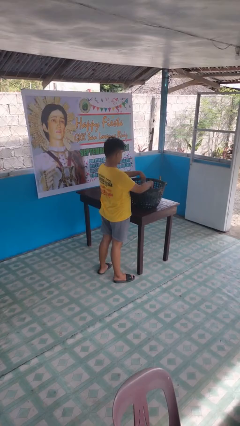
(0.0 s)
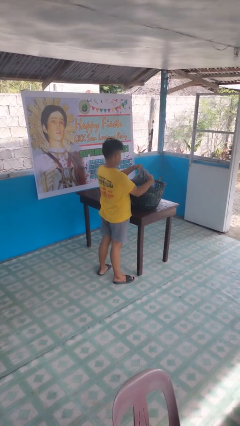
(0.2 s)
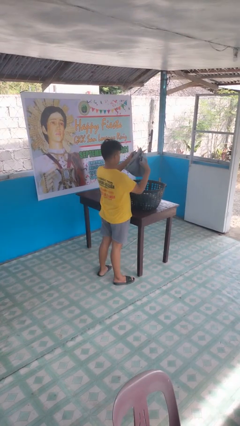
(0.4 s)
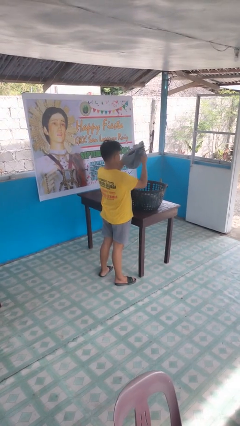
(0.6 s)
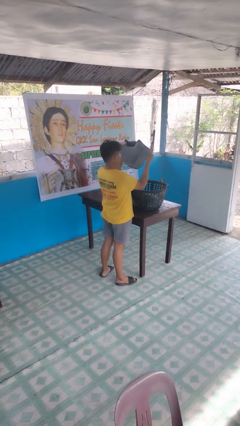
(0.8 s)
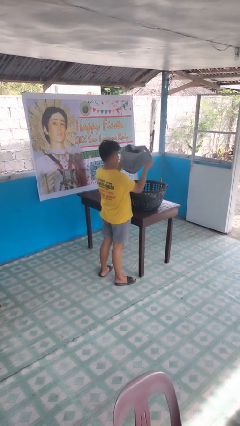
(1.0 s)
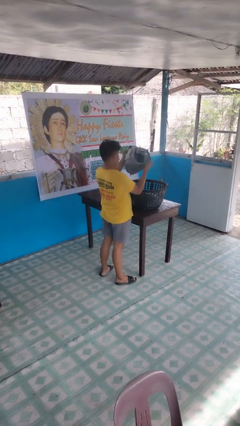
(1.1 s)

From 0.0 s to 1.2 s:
person takes object from basket

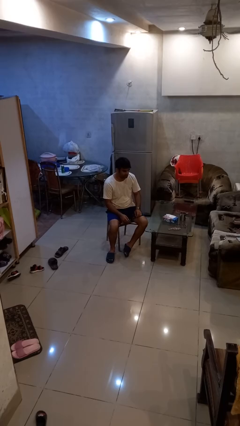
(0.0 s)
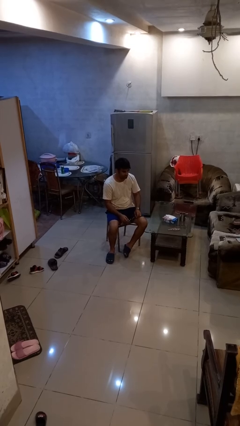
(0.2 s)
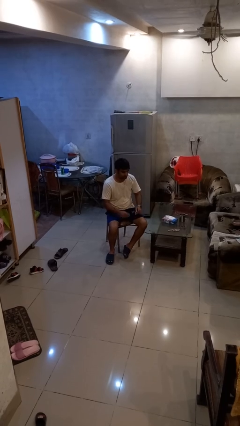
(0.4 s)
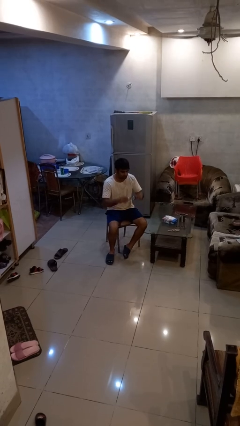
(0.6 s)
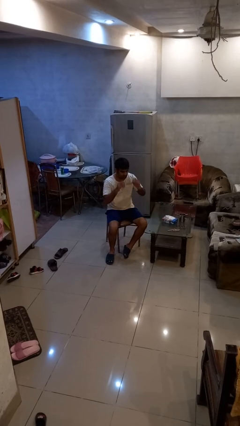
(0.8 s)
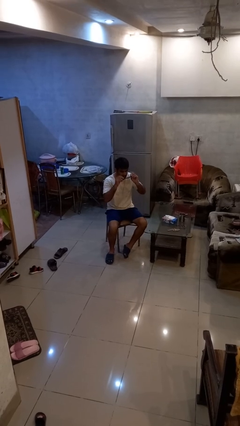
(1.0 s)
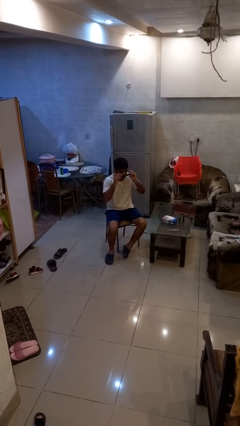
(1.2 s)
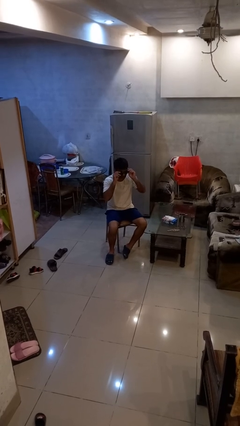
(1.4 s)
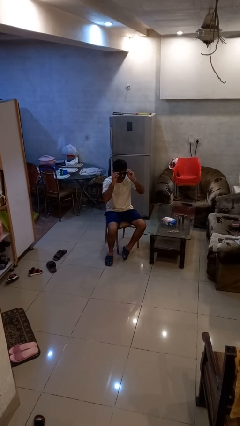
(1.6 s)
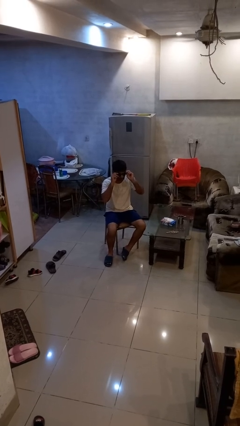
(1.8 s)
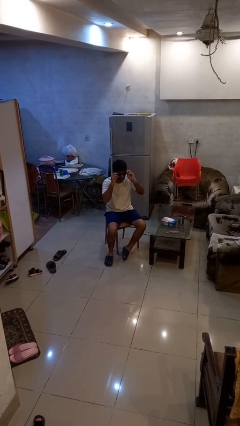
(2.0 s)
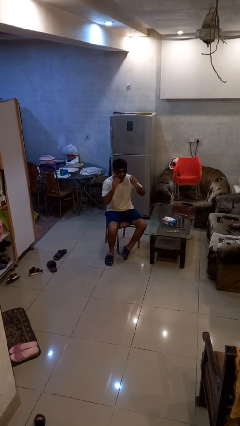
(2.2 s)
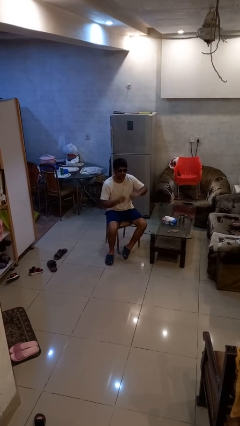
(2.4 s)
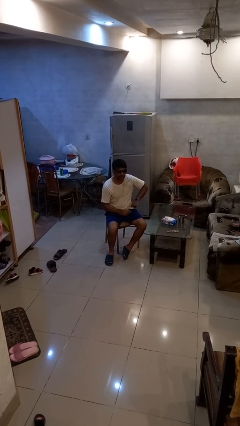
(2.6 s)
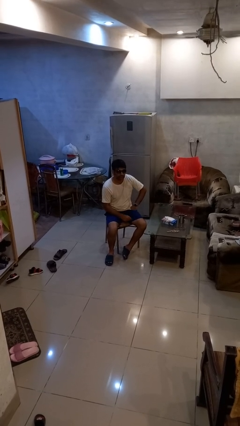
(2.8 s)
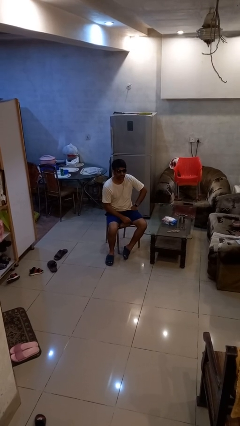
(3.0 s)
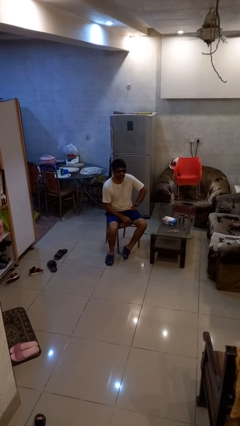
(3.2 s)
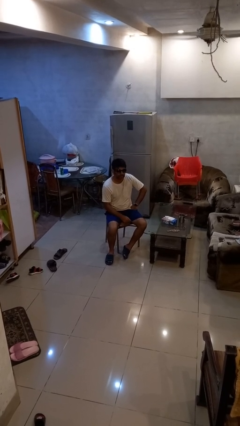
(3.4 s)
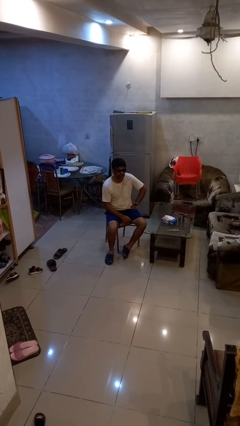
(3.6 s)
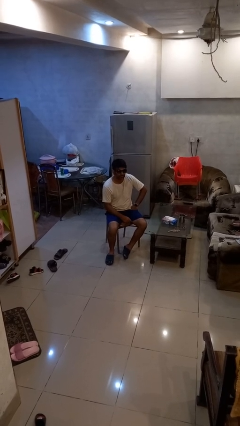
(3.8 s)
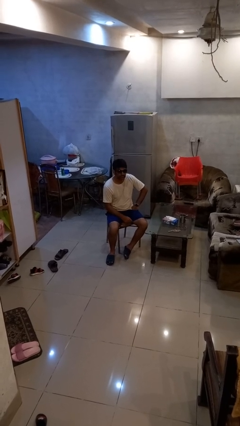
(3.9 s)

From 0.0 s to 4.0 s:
person puts on sunglasses

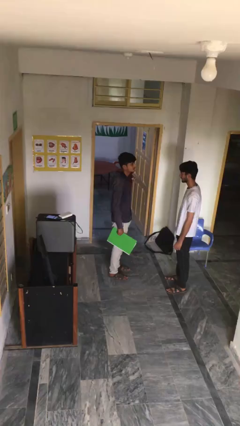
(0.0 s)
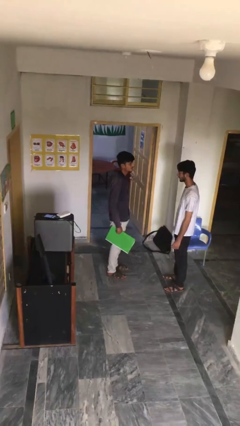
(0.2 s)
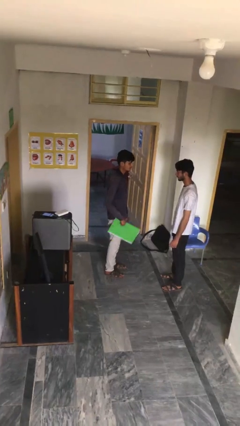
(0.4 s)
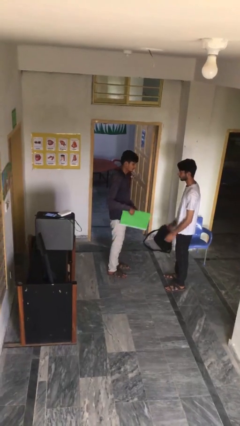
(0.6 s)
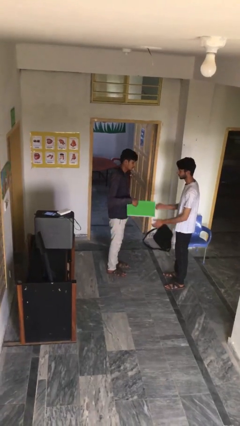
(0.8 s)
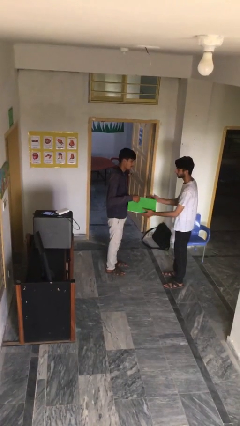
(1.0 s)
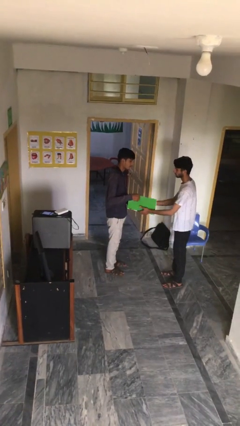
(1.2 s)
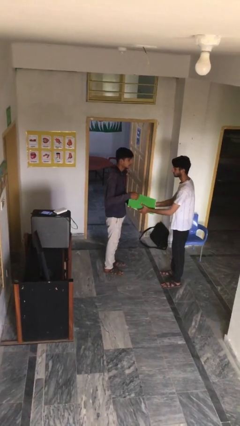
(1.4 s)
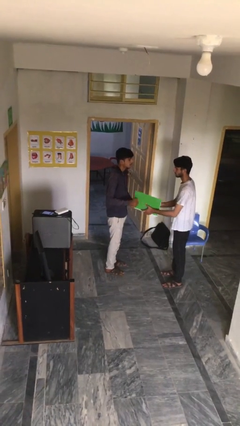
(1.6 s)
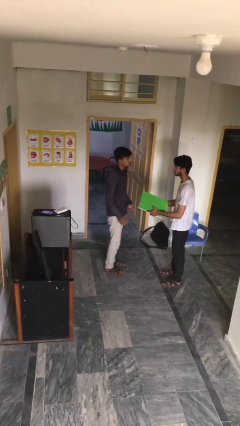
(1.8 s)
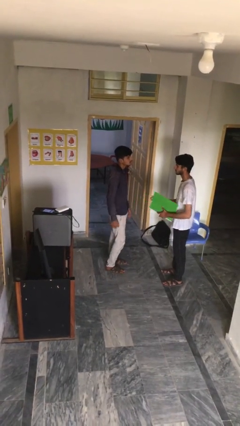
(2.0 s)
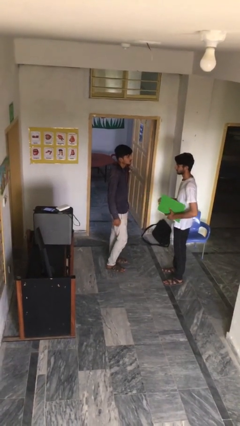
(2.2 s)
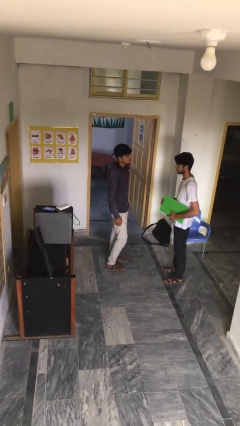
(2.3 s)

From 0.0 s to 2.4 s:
person transfers object to person

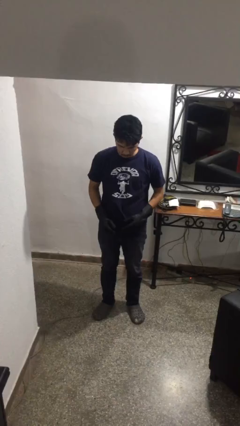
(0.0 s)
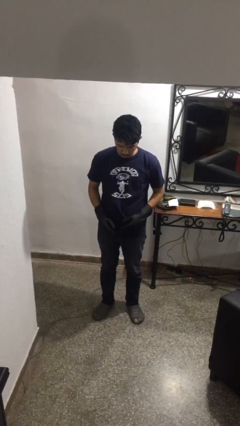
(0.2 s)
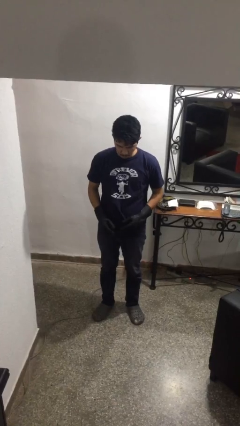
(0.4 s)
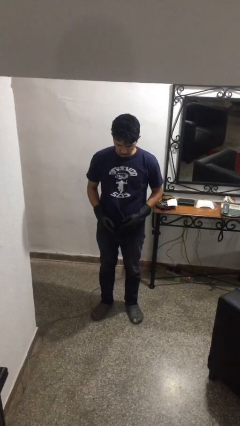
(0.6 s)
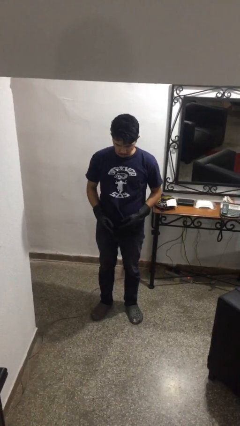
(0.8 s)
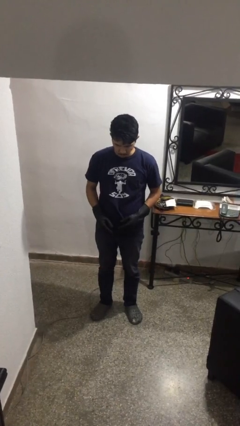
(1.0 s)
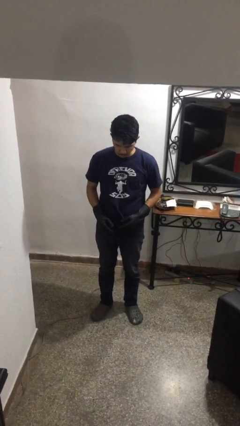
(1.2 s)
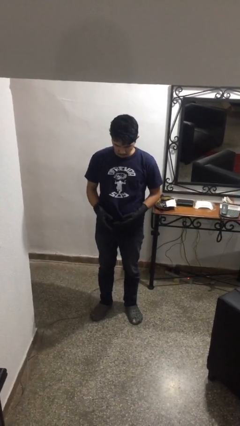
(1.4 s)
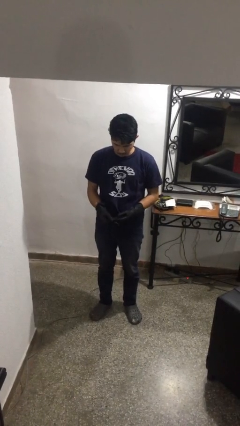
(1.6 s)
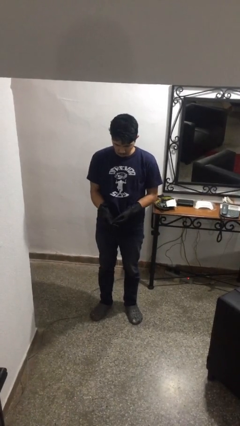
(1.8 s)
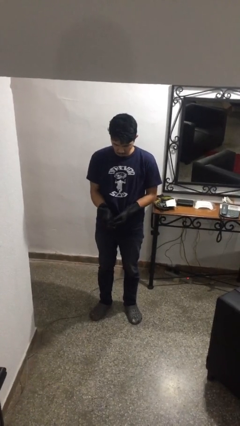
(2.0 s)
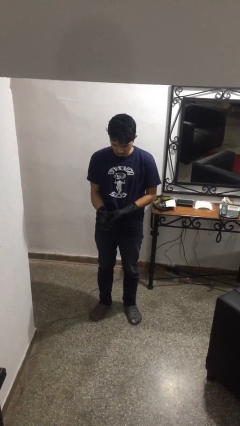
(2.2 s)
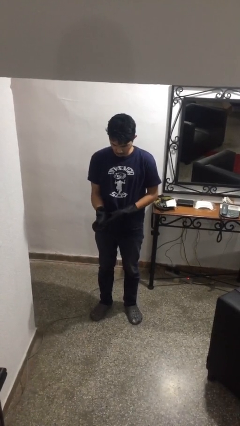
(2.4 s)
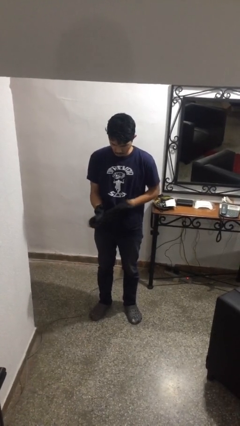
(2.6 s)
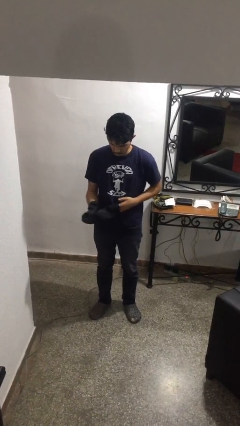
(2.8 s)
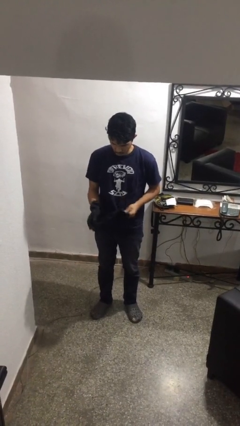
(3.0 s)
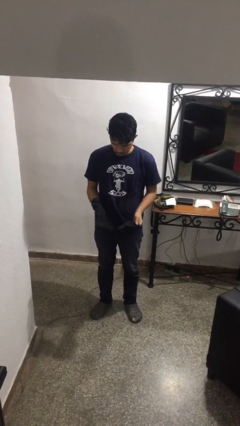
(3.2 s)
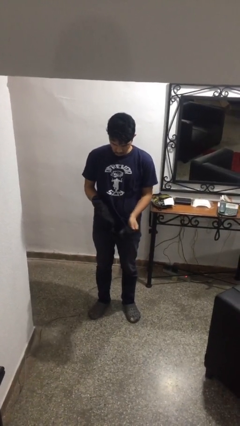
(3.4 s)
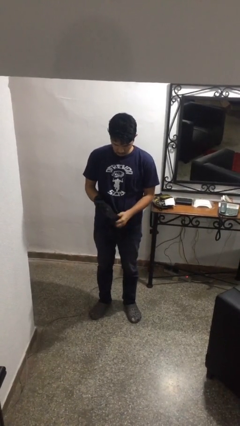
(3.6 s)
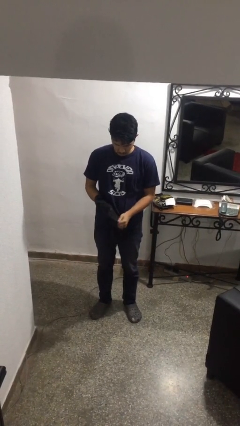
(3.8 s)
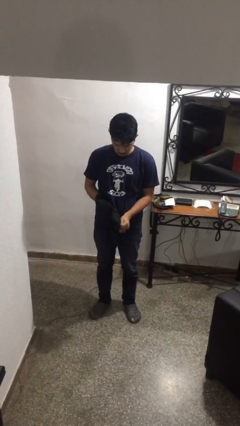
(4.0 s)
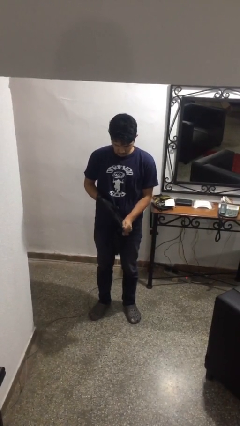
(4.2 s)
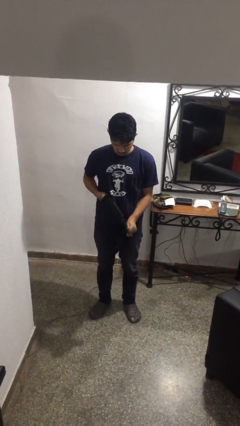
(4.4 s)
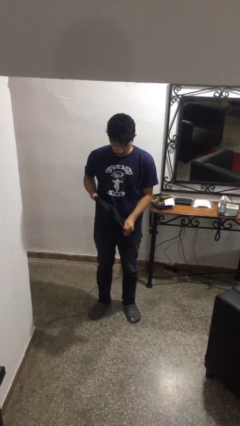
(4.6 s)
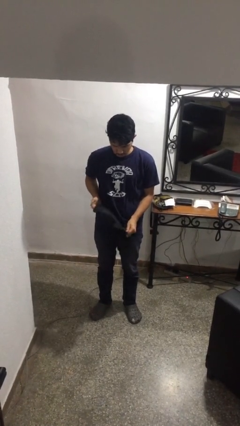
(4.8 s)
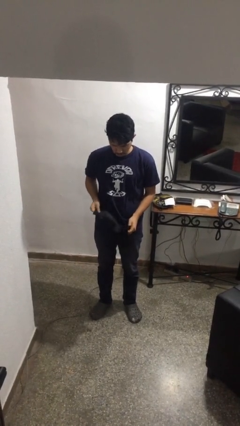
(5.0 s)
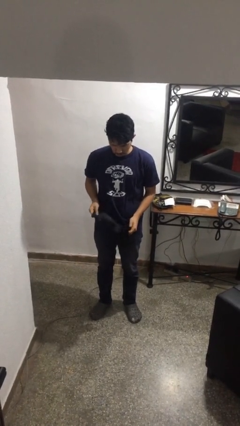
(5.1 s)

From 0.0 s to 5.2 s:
person takes off gloves

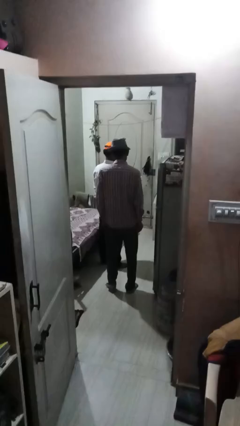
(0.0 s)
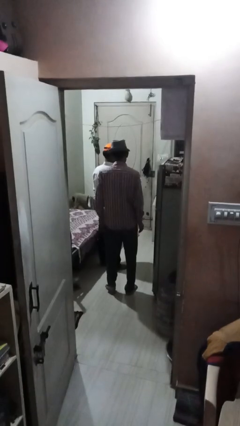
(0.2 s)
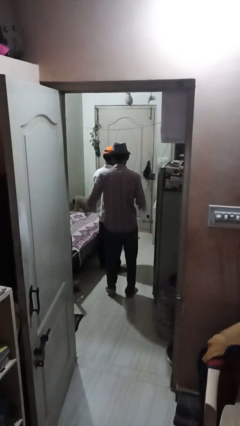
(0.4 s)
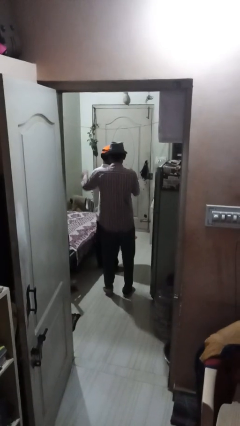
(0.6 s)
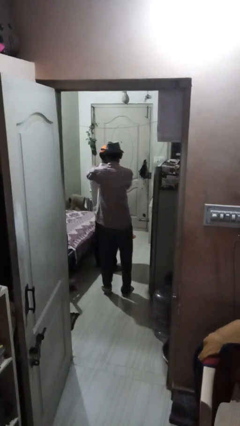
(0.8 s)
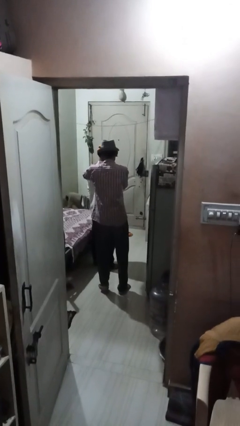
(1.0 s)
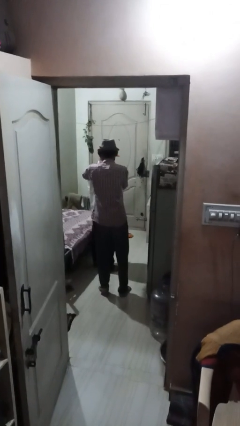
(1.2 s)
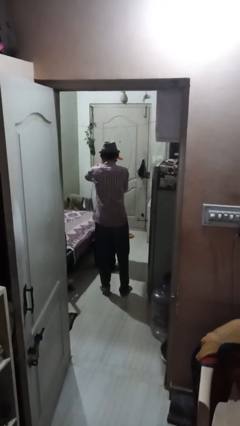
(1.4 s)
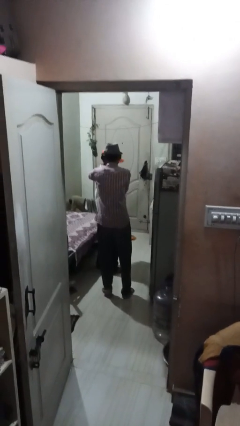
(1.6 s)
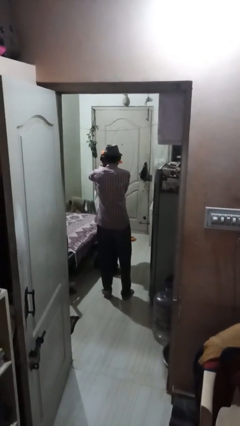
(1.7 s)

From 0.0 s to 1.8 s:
person pounds shoulders of person

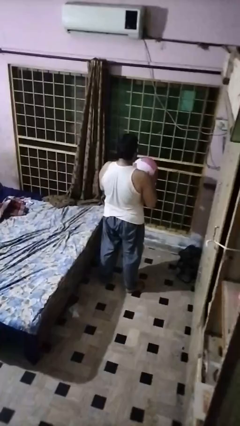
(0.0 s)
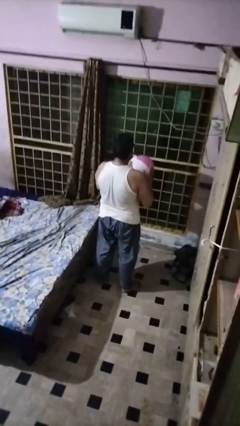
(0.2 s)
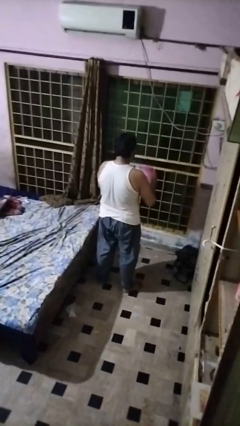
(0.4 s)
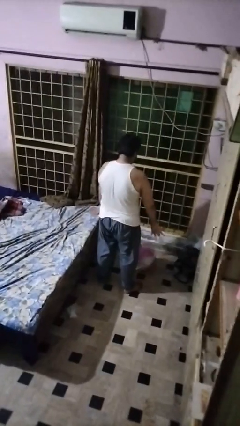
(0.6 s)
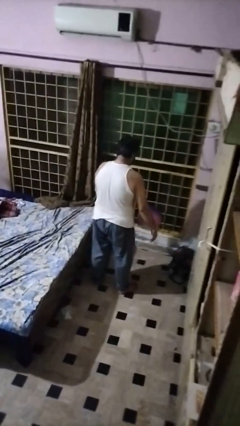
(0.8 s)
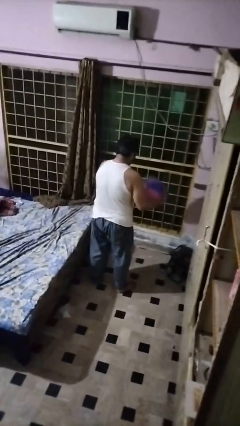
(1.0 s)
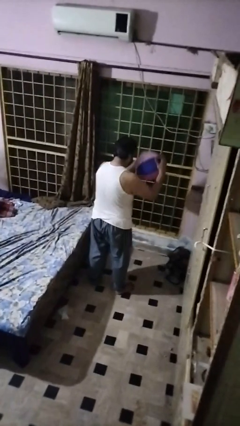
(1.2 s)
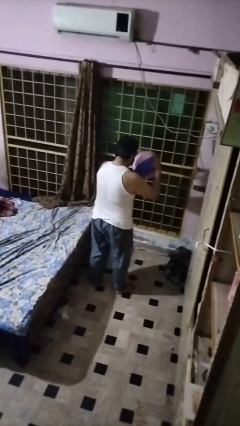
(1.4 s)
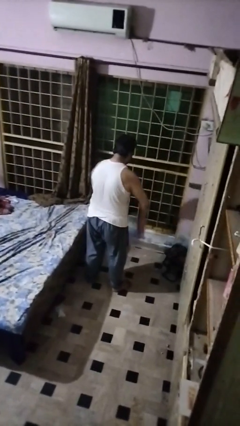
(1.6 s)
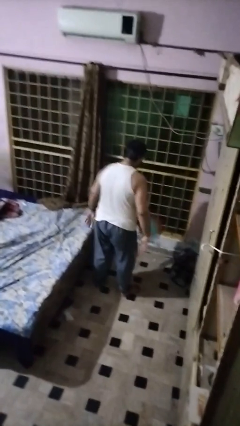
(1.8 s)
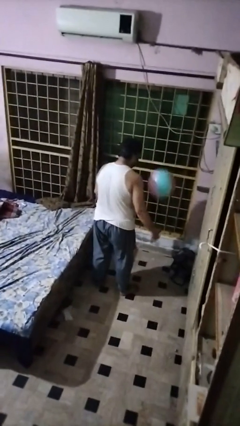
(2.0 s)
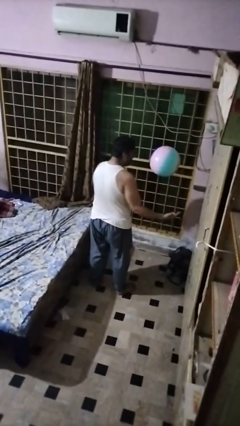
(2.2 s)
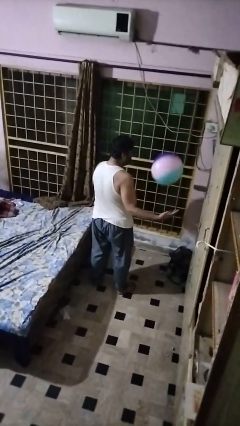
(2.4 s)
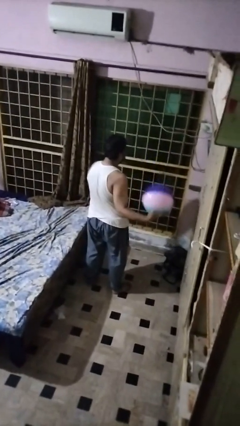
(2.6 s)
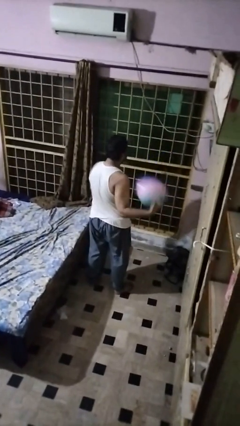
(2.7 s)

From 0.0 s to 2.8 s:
person bounces ball on floor
